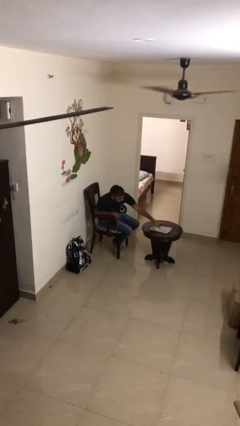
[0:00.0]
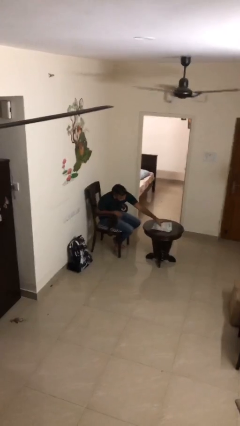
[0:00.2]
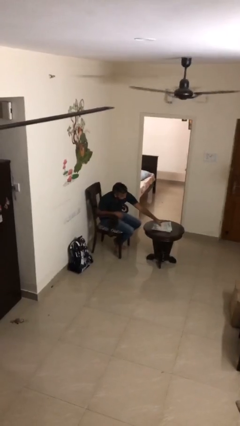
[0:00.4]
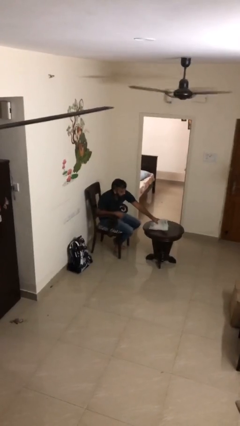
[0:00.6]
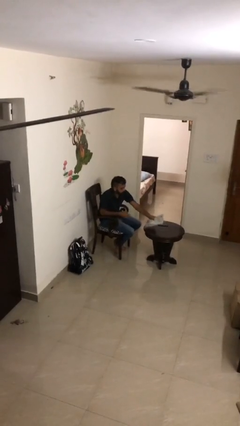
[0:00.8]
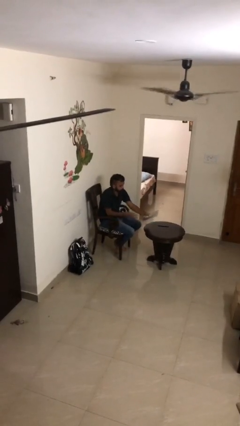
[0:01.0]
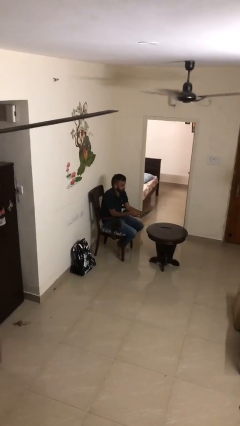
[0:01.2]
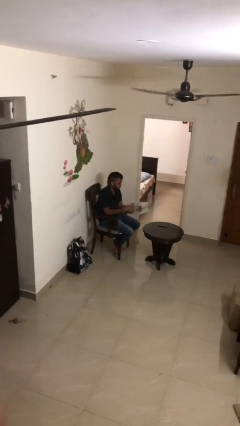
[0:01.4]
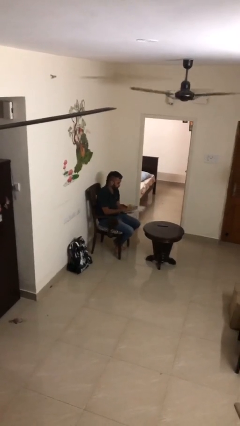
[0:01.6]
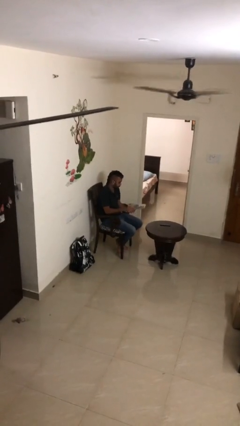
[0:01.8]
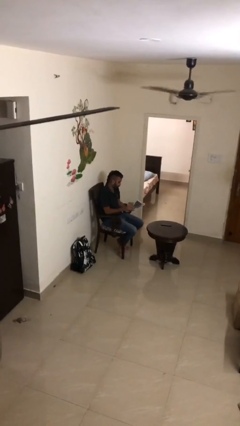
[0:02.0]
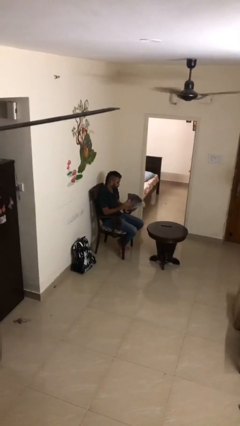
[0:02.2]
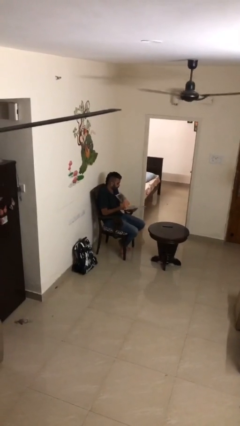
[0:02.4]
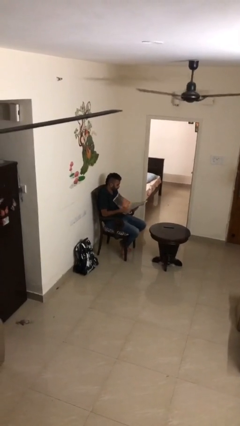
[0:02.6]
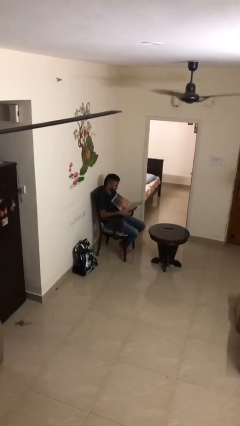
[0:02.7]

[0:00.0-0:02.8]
person picks up object from table

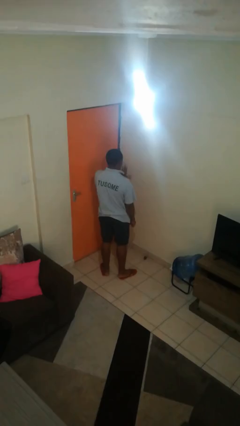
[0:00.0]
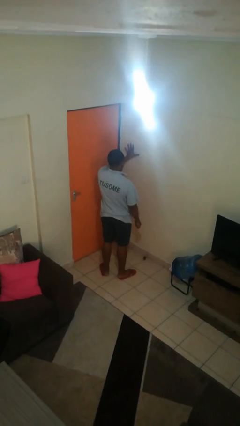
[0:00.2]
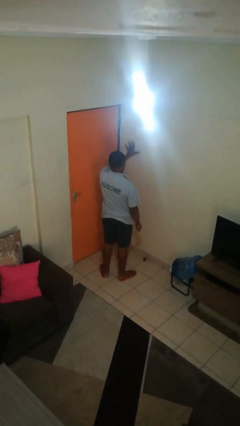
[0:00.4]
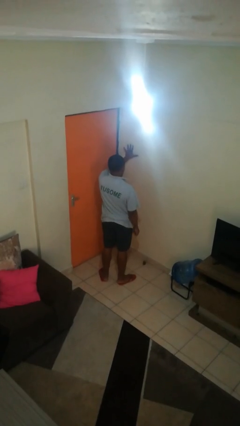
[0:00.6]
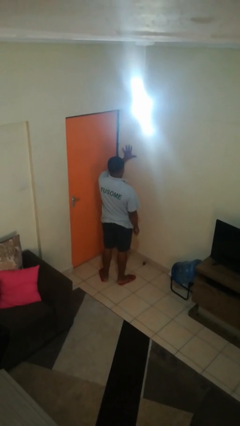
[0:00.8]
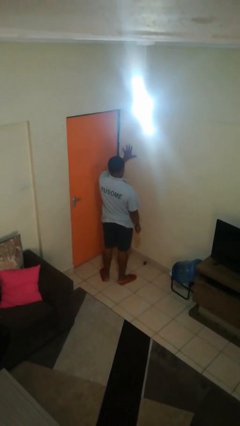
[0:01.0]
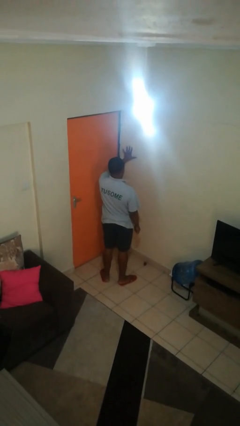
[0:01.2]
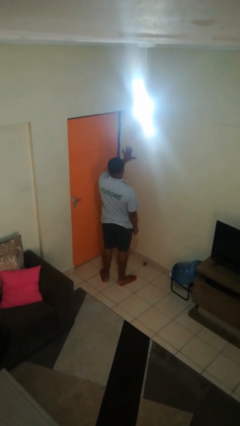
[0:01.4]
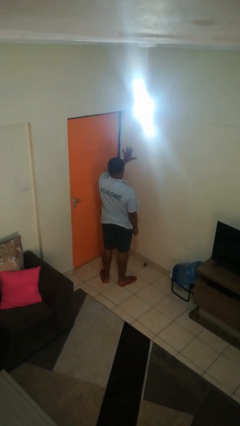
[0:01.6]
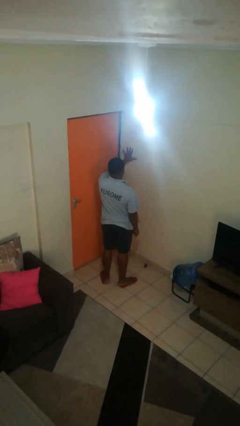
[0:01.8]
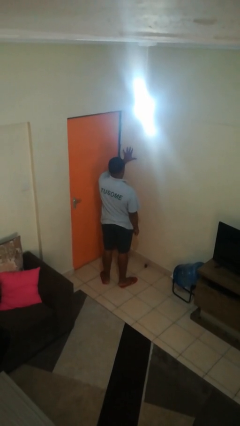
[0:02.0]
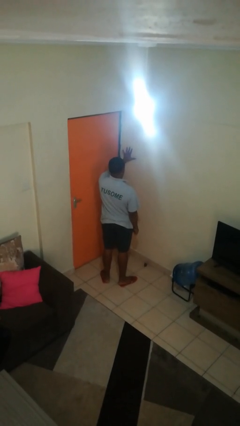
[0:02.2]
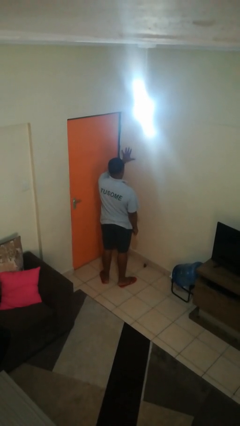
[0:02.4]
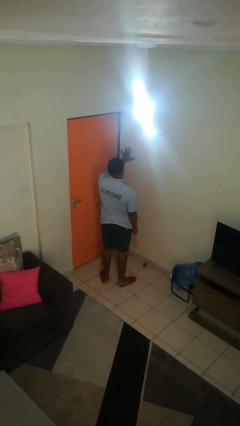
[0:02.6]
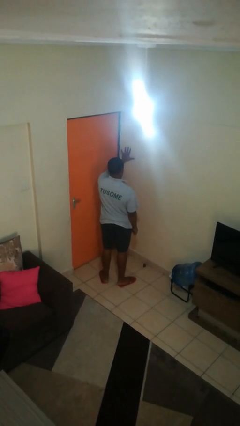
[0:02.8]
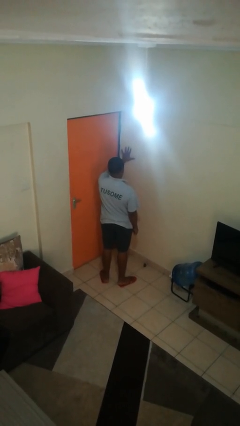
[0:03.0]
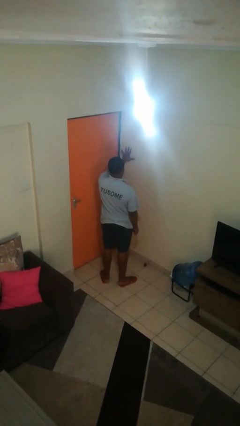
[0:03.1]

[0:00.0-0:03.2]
person gestures number five

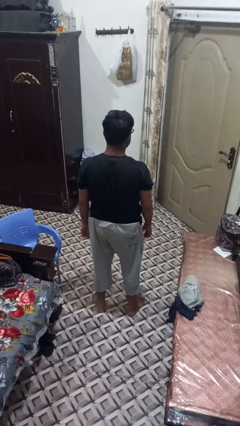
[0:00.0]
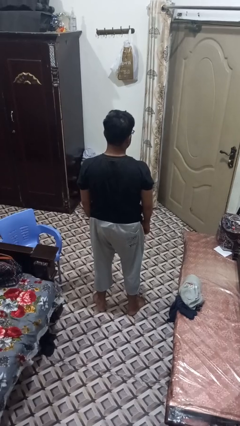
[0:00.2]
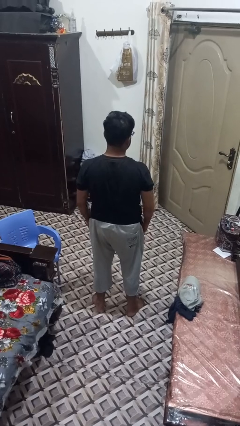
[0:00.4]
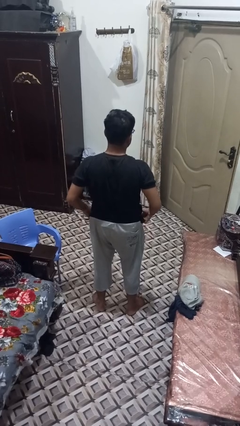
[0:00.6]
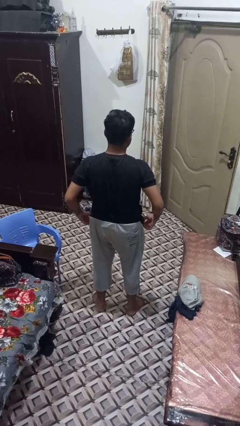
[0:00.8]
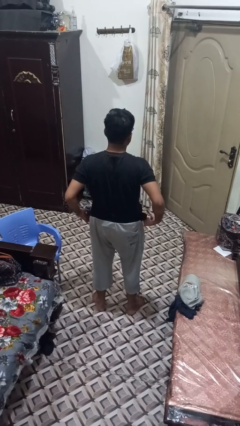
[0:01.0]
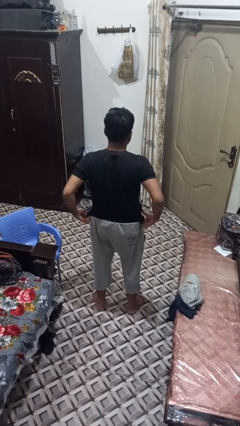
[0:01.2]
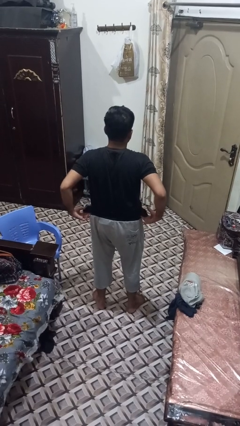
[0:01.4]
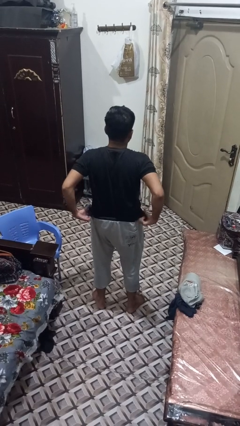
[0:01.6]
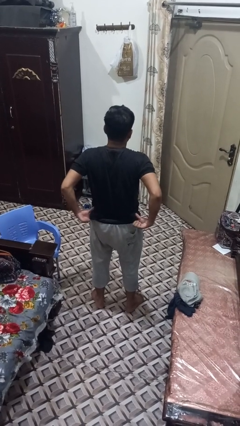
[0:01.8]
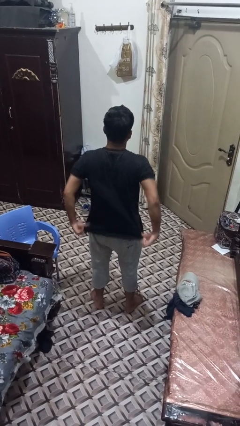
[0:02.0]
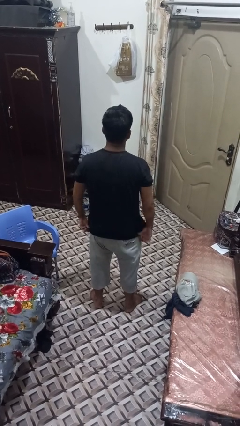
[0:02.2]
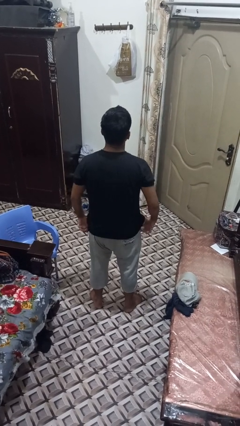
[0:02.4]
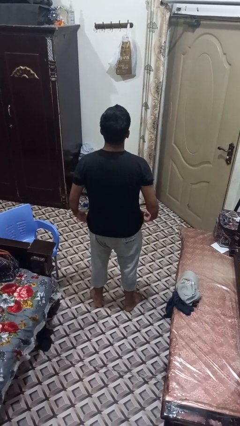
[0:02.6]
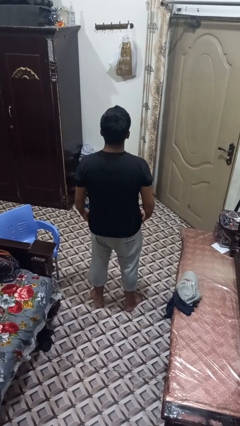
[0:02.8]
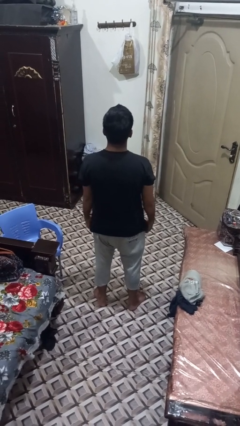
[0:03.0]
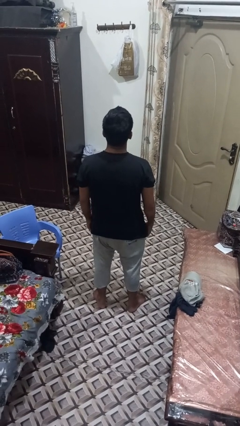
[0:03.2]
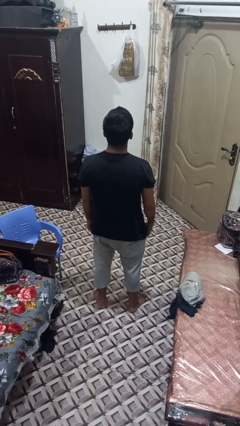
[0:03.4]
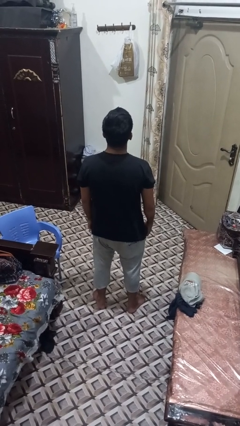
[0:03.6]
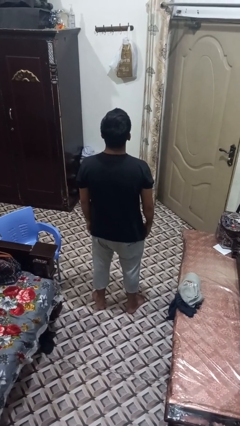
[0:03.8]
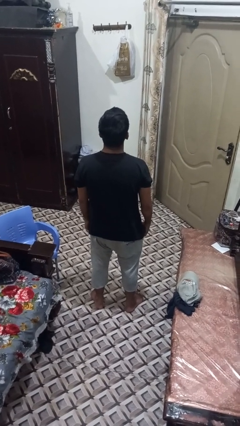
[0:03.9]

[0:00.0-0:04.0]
person untucks shirt

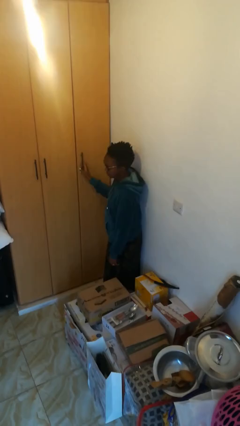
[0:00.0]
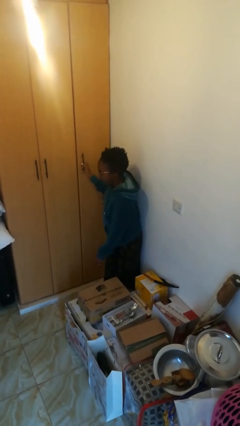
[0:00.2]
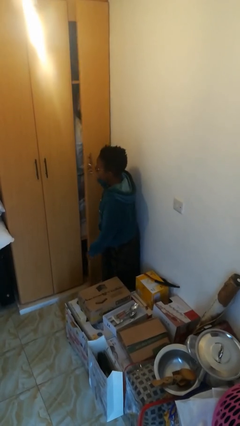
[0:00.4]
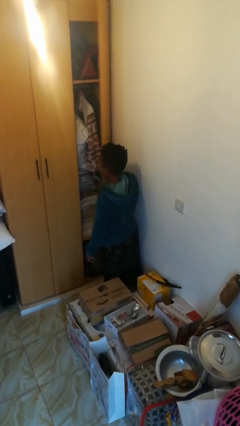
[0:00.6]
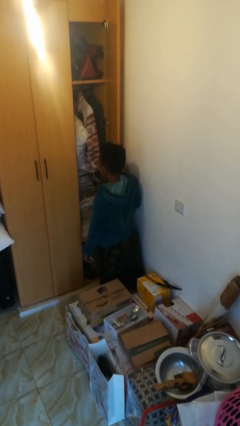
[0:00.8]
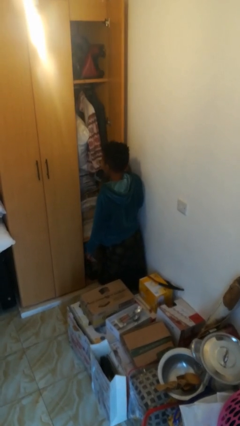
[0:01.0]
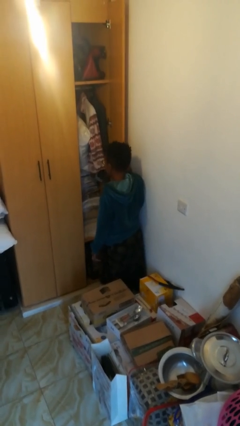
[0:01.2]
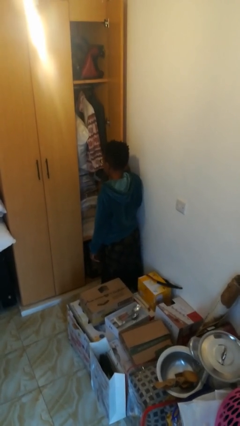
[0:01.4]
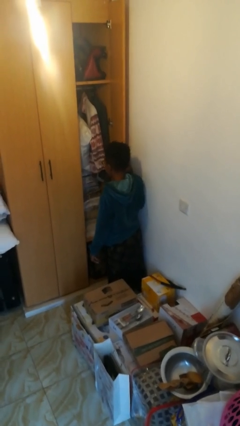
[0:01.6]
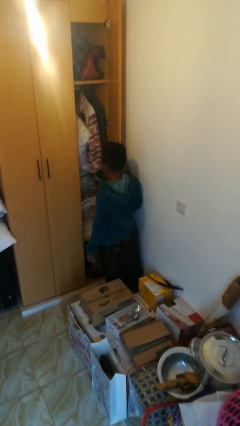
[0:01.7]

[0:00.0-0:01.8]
person opens closet door

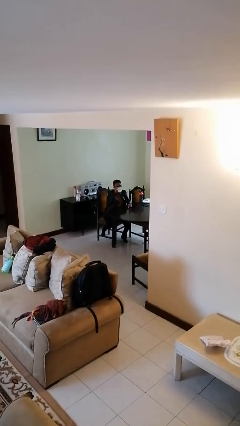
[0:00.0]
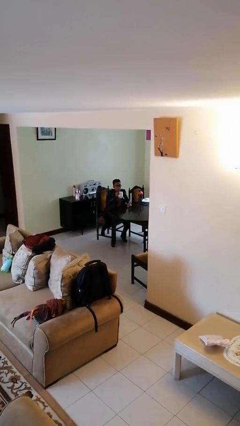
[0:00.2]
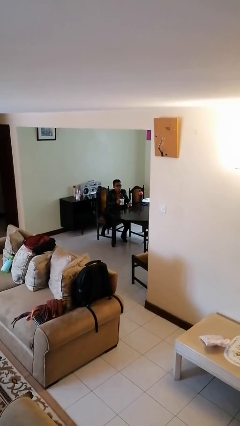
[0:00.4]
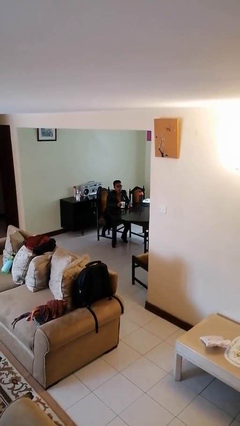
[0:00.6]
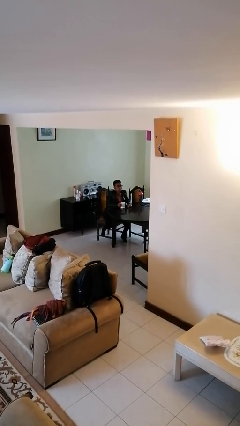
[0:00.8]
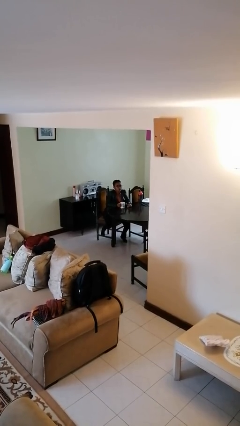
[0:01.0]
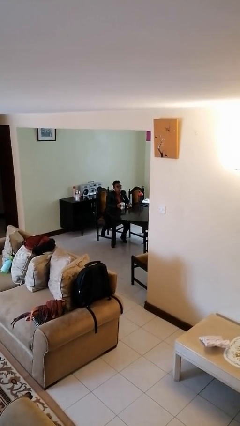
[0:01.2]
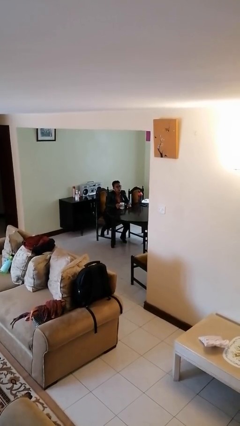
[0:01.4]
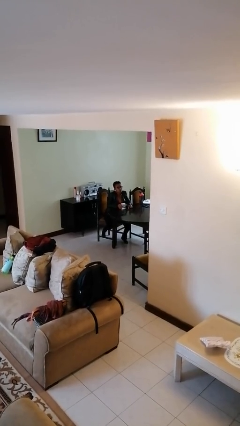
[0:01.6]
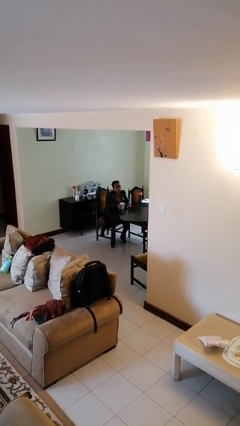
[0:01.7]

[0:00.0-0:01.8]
person puts down object on table

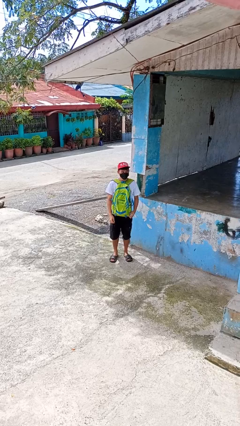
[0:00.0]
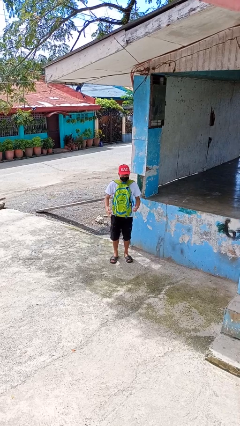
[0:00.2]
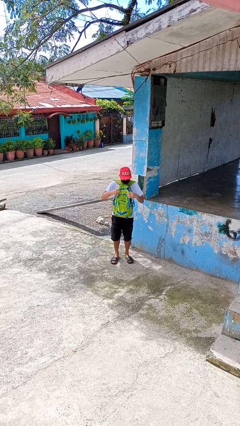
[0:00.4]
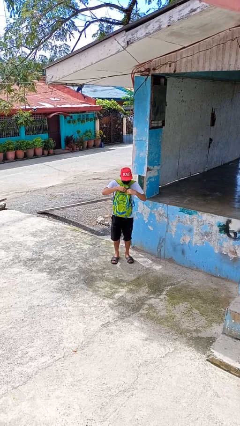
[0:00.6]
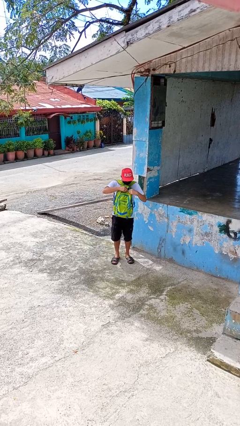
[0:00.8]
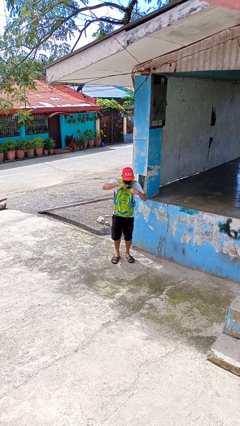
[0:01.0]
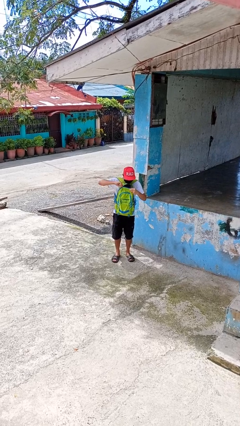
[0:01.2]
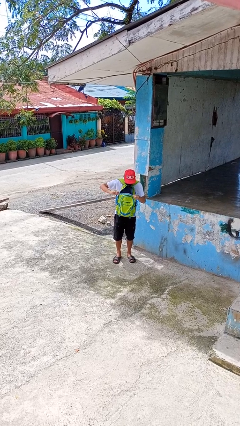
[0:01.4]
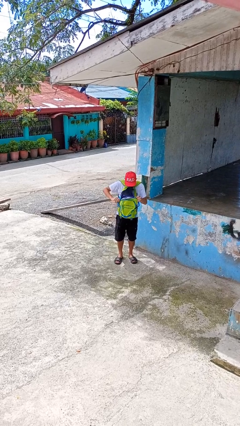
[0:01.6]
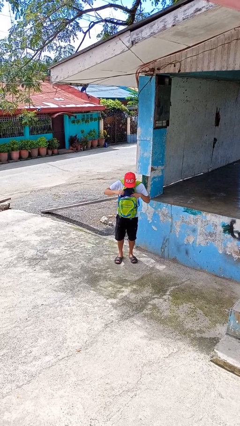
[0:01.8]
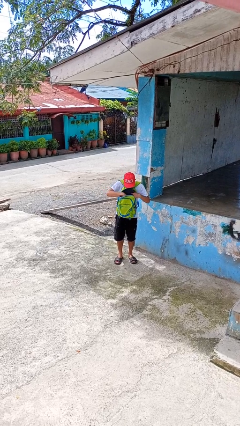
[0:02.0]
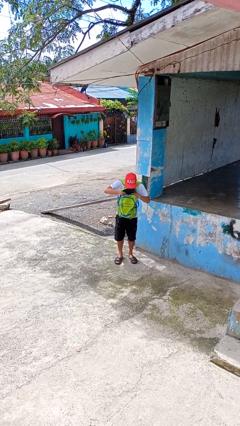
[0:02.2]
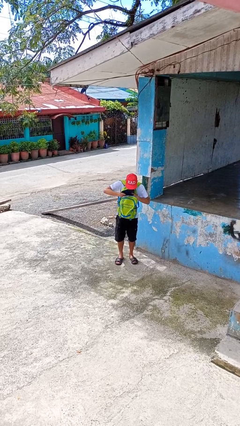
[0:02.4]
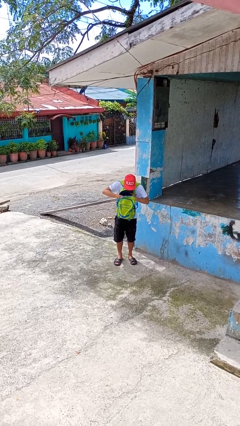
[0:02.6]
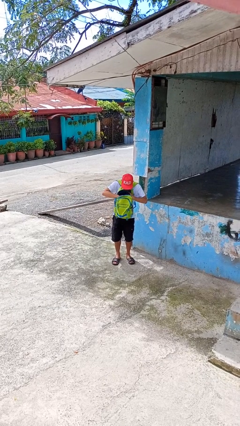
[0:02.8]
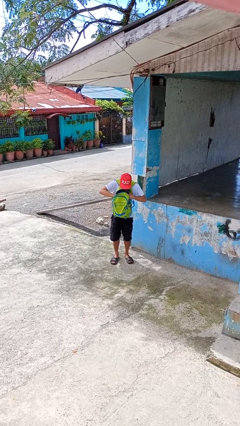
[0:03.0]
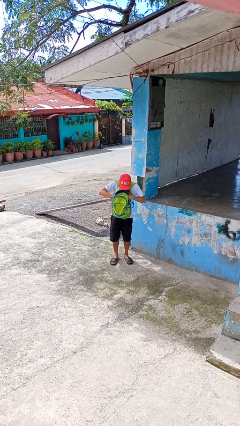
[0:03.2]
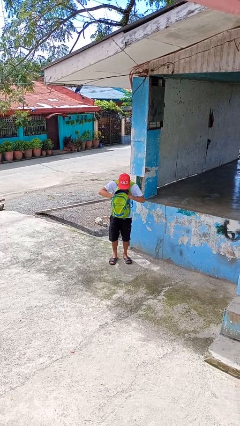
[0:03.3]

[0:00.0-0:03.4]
person searches in backpack

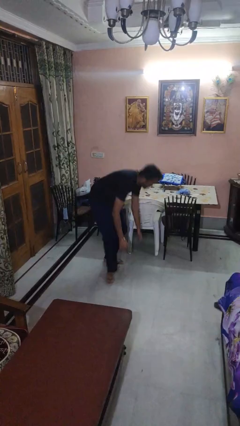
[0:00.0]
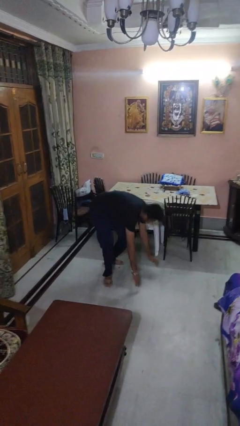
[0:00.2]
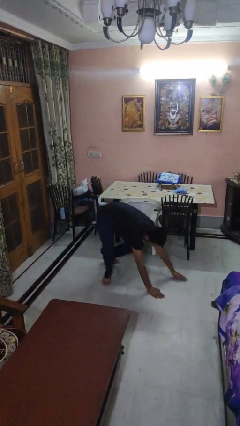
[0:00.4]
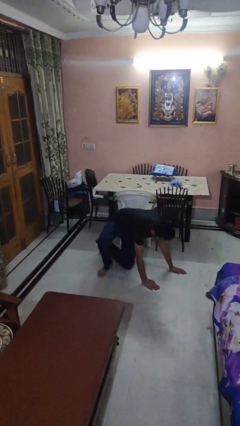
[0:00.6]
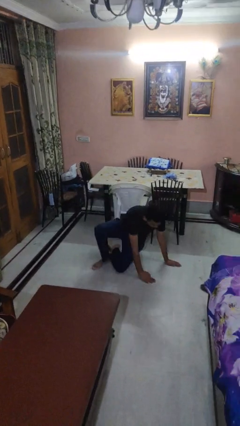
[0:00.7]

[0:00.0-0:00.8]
person trips on object on floor
